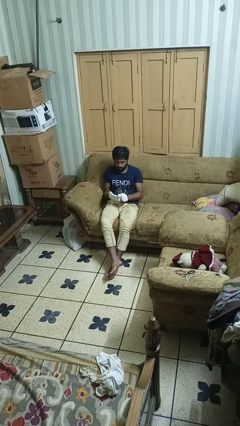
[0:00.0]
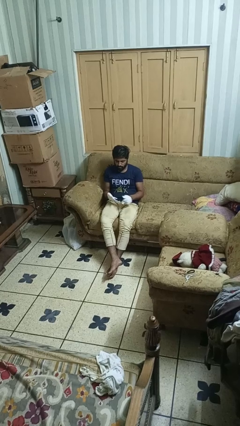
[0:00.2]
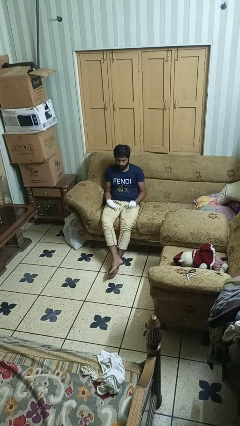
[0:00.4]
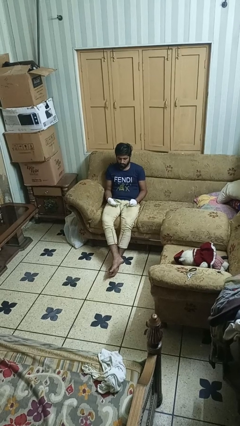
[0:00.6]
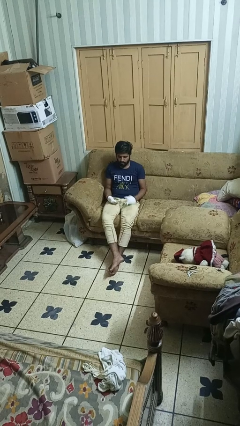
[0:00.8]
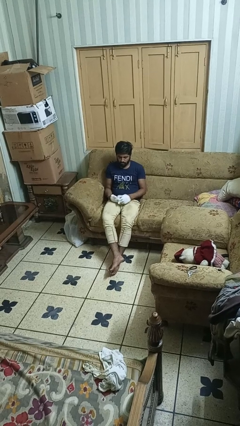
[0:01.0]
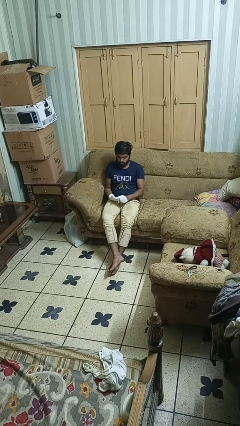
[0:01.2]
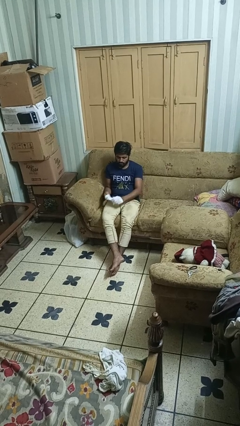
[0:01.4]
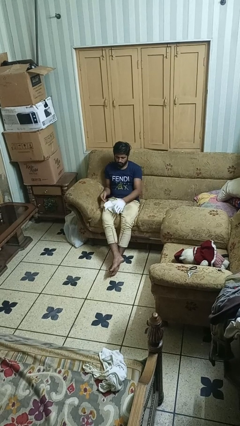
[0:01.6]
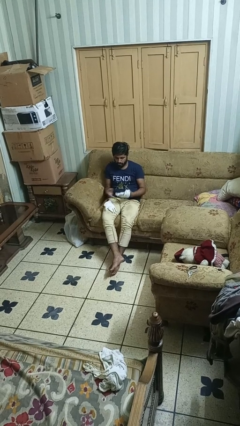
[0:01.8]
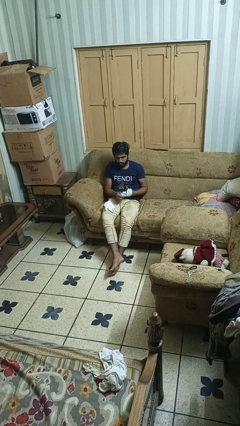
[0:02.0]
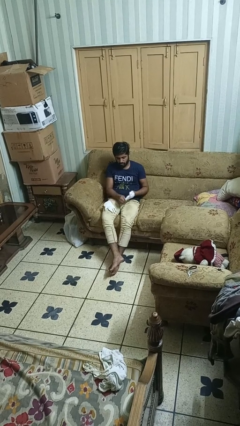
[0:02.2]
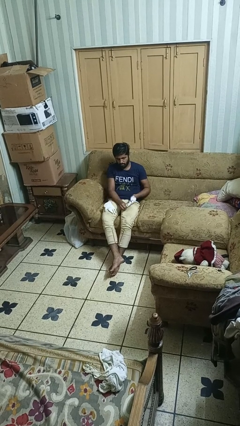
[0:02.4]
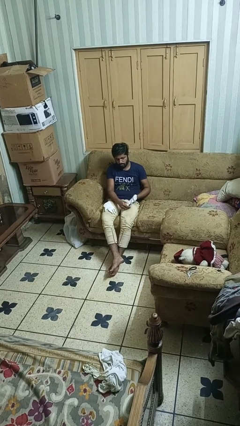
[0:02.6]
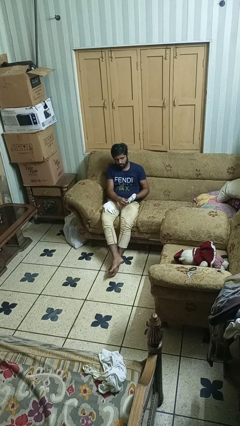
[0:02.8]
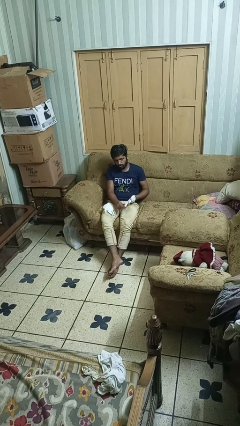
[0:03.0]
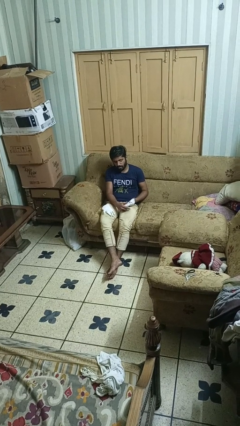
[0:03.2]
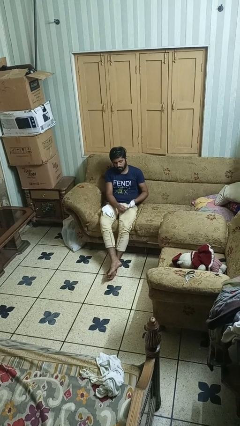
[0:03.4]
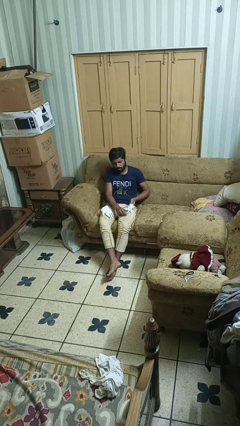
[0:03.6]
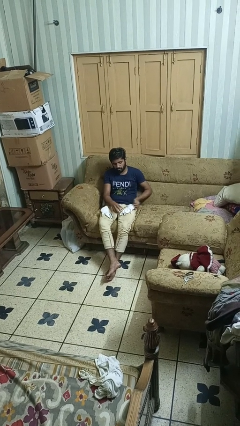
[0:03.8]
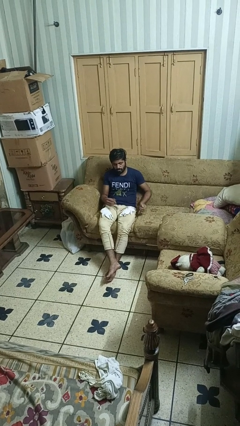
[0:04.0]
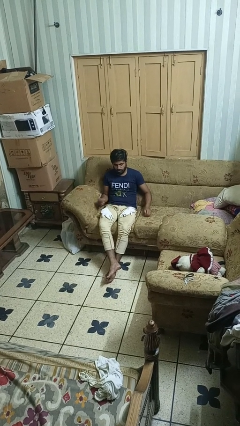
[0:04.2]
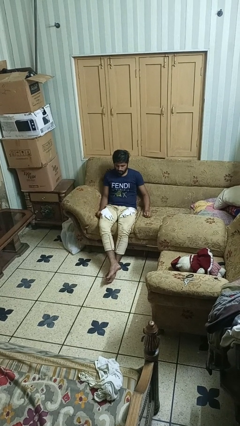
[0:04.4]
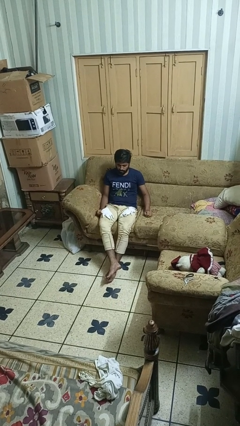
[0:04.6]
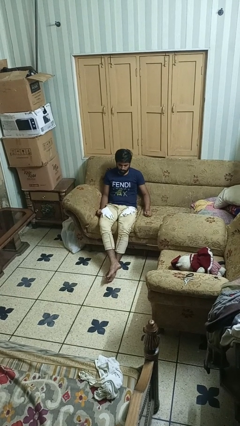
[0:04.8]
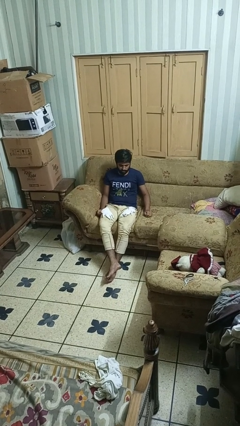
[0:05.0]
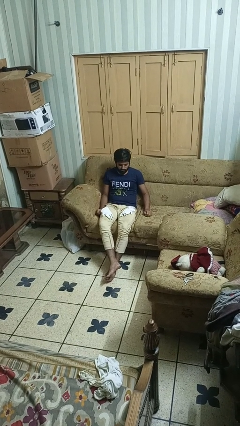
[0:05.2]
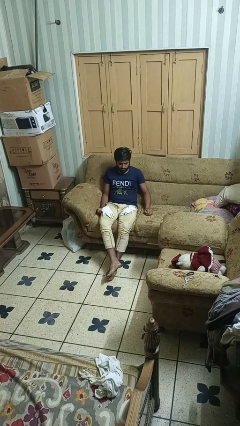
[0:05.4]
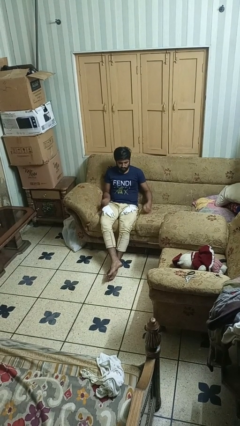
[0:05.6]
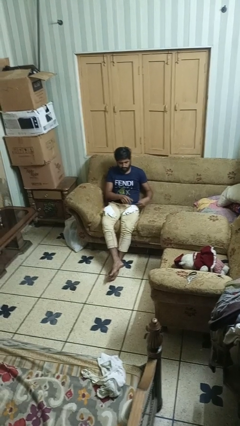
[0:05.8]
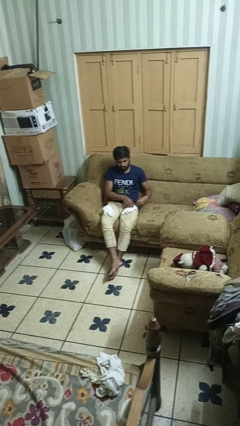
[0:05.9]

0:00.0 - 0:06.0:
person takes off gloves

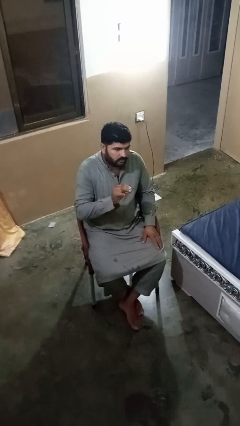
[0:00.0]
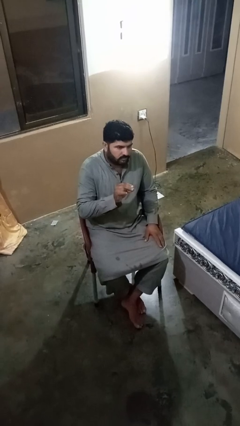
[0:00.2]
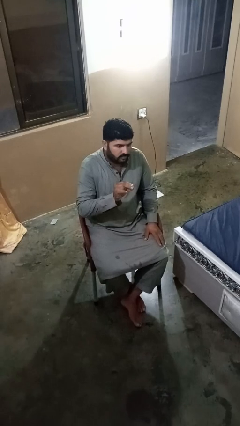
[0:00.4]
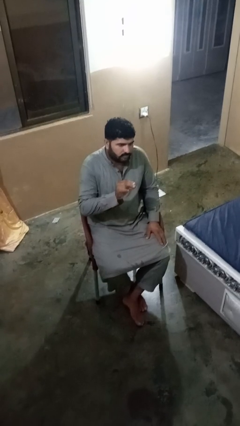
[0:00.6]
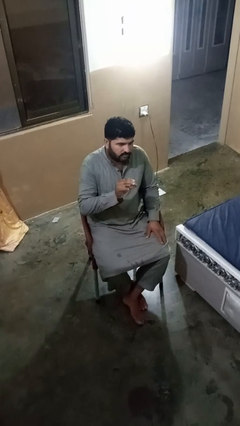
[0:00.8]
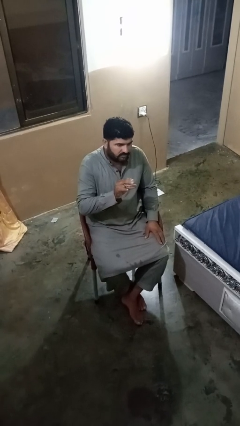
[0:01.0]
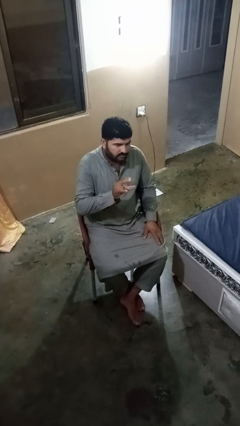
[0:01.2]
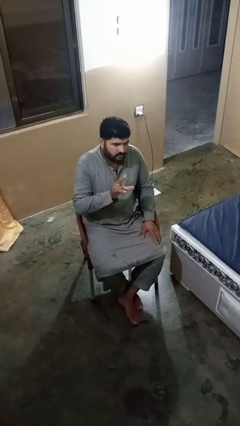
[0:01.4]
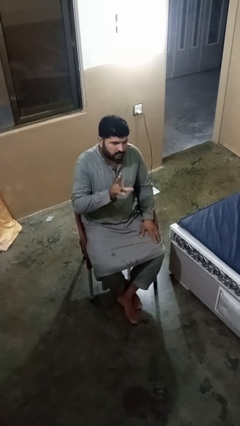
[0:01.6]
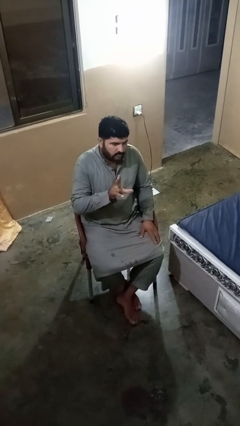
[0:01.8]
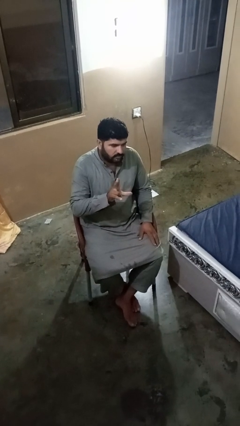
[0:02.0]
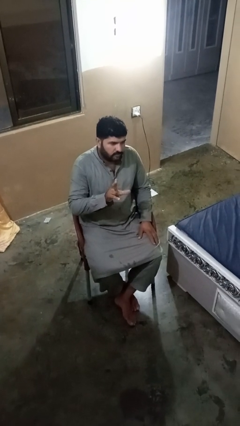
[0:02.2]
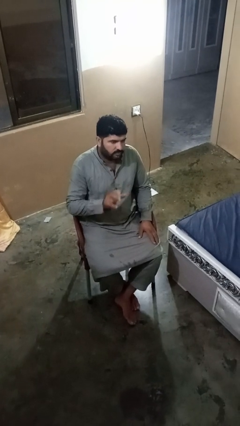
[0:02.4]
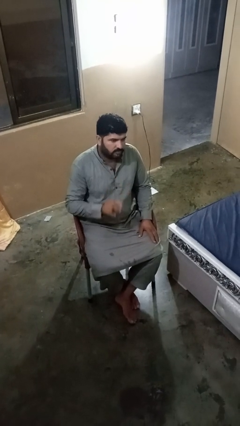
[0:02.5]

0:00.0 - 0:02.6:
person gestures zoom out

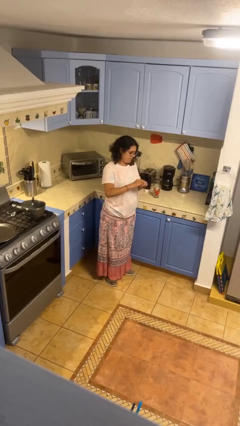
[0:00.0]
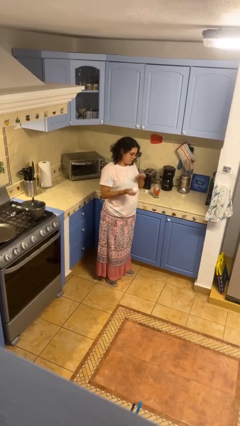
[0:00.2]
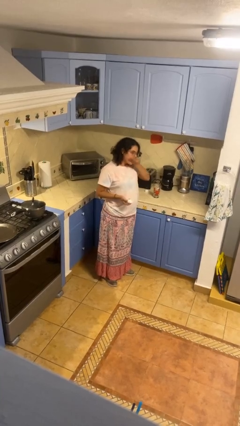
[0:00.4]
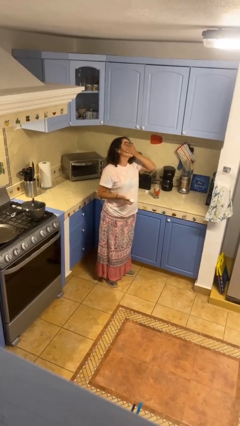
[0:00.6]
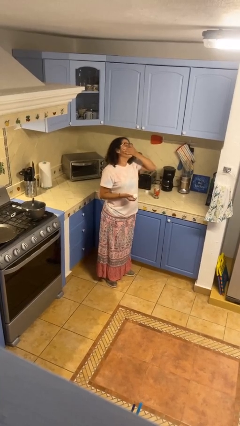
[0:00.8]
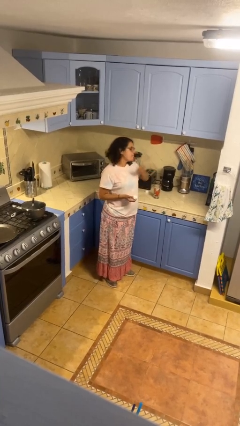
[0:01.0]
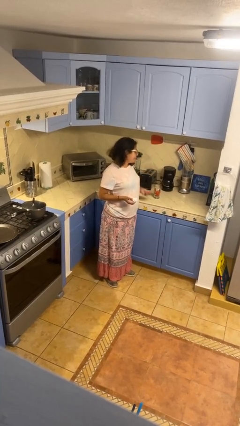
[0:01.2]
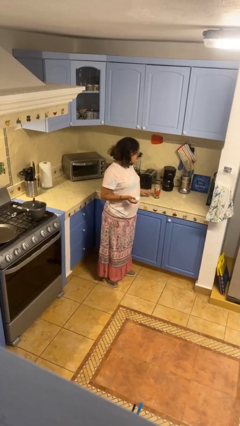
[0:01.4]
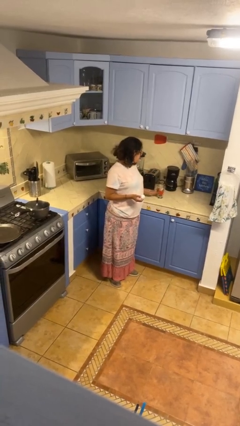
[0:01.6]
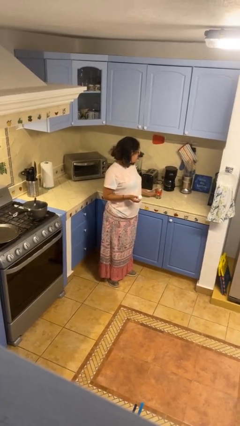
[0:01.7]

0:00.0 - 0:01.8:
person takes medicine pills

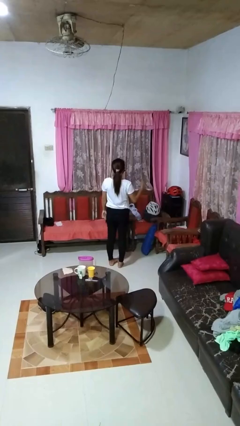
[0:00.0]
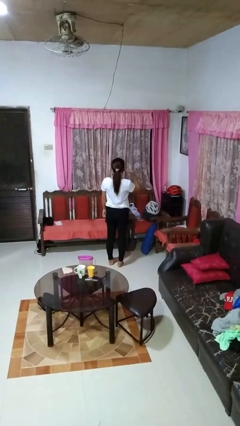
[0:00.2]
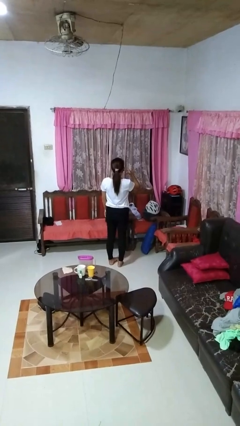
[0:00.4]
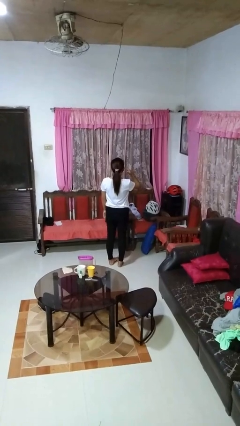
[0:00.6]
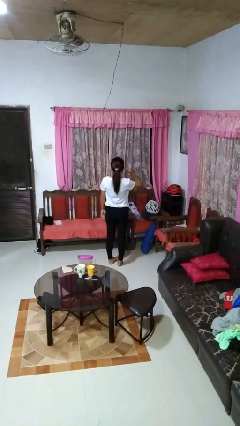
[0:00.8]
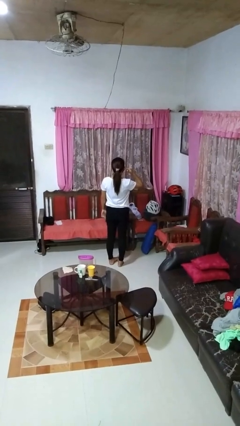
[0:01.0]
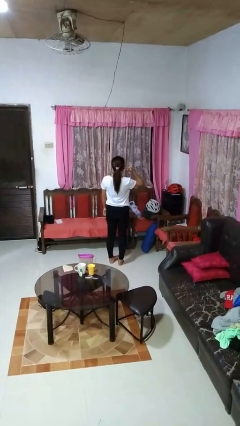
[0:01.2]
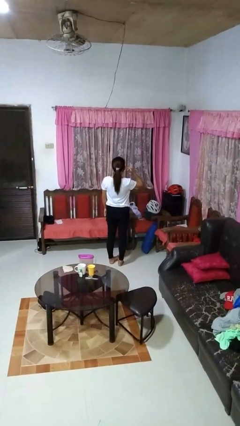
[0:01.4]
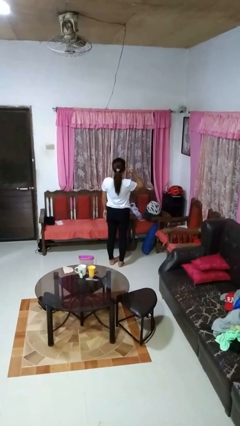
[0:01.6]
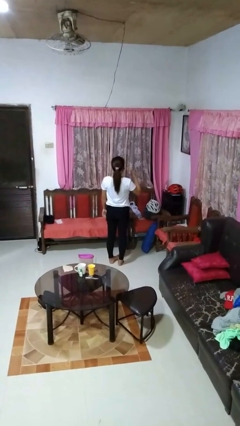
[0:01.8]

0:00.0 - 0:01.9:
person gestures listen closely

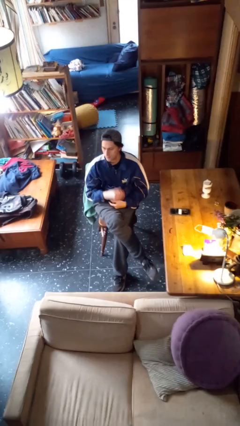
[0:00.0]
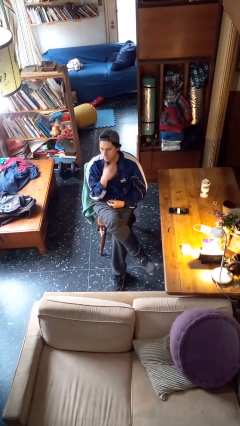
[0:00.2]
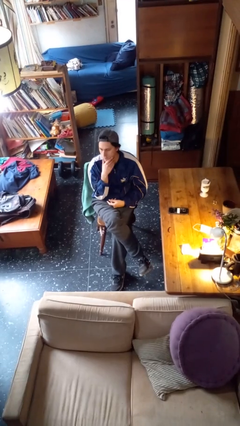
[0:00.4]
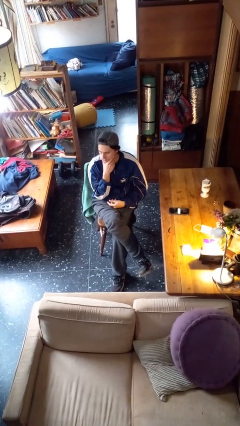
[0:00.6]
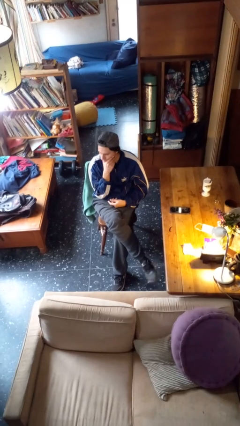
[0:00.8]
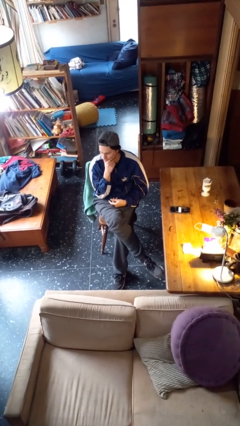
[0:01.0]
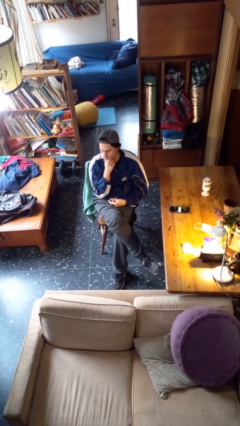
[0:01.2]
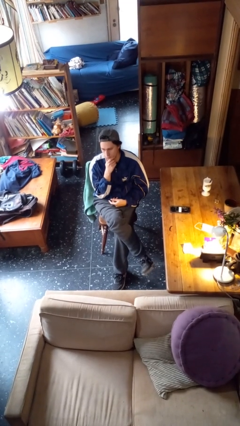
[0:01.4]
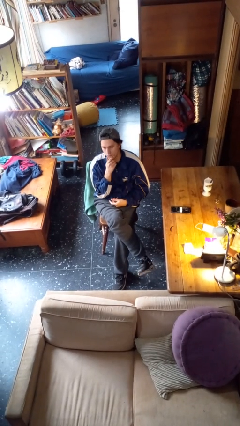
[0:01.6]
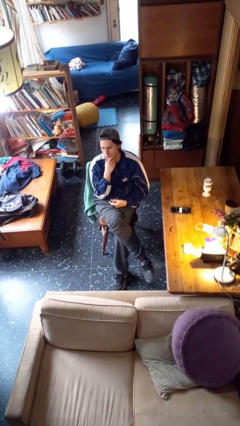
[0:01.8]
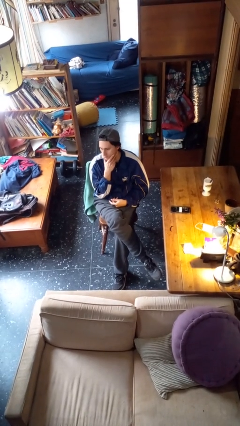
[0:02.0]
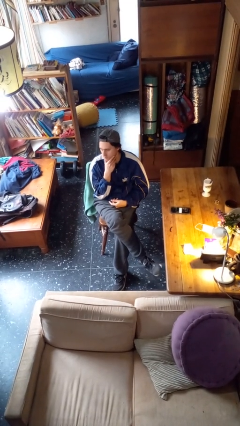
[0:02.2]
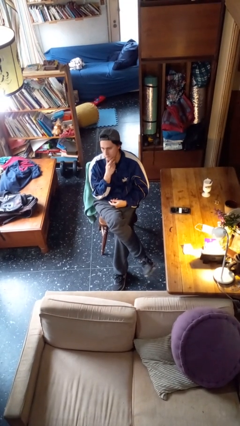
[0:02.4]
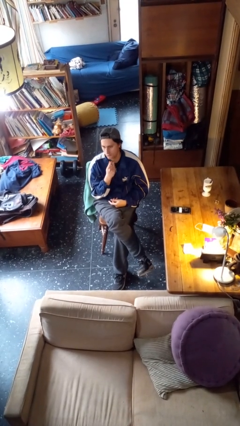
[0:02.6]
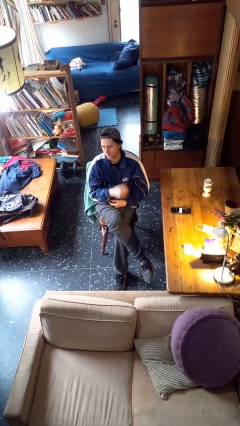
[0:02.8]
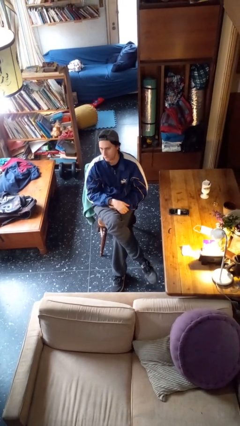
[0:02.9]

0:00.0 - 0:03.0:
person strokes chin

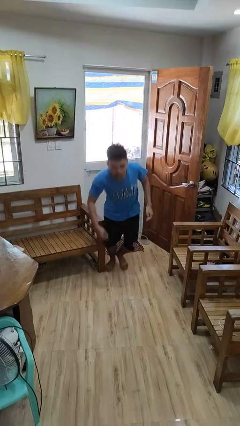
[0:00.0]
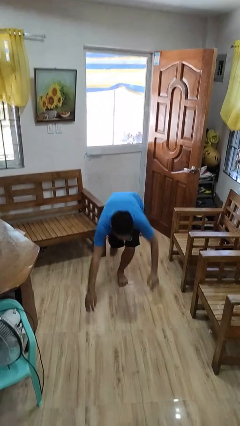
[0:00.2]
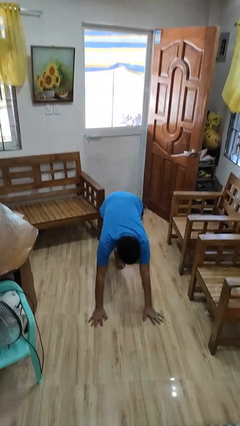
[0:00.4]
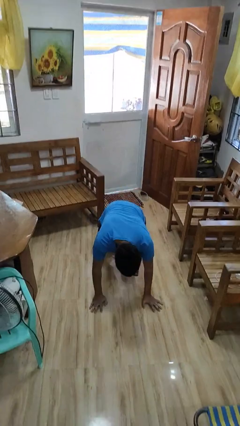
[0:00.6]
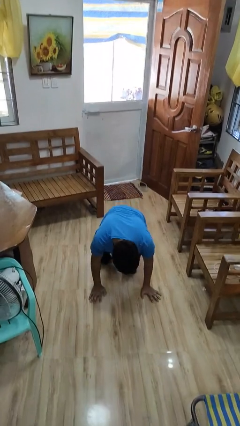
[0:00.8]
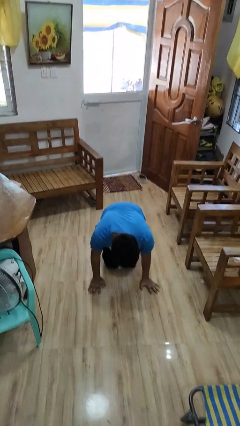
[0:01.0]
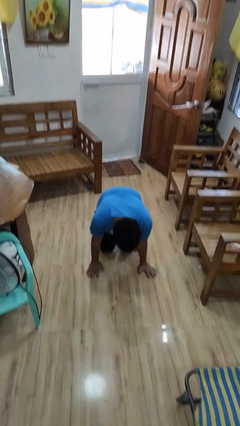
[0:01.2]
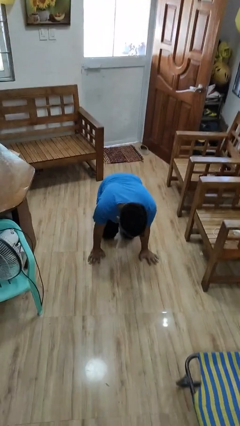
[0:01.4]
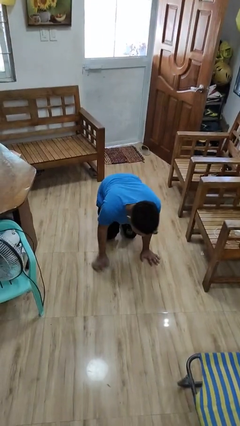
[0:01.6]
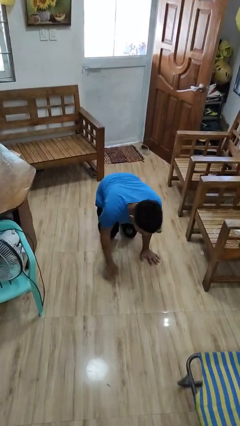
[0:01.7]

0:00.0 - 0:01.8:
person trips on object on floor

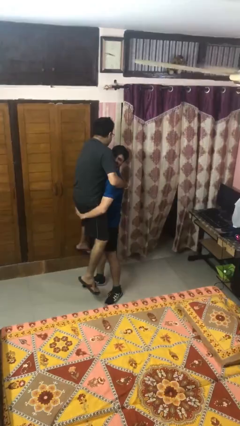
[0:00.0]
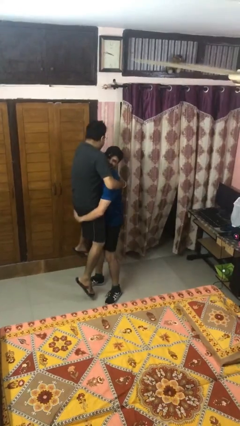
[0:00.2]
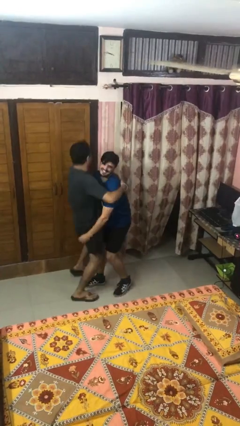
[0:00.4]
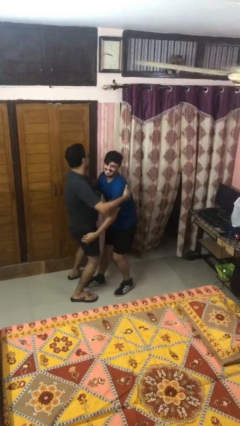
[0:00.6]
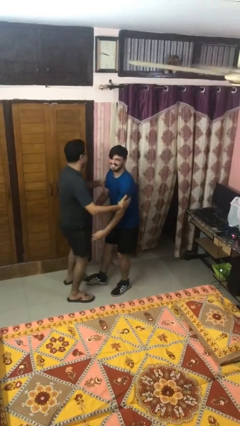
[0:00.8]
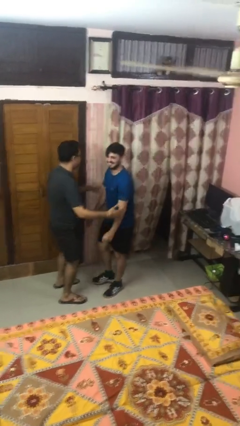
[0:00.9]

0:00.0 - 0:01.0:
person puts down person
